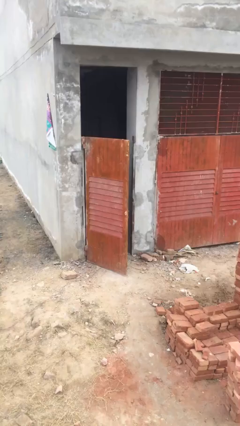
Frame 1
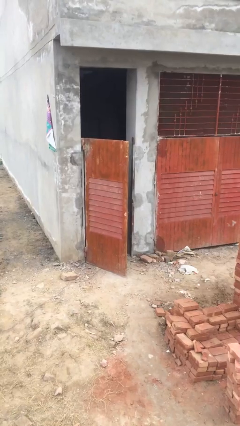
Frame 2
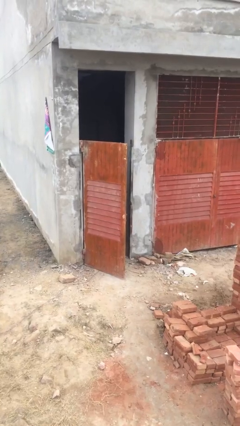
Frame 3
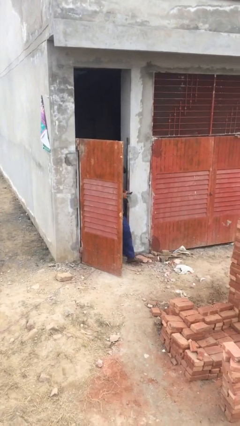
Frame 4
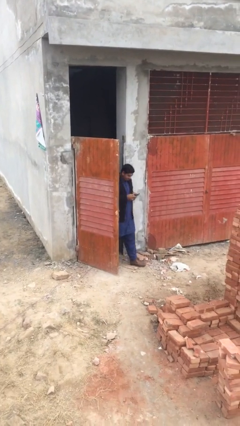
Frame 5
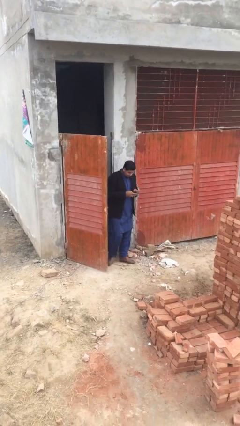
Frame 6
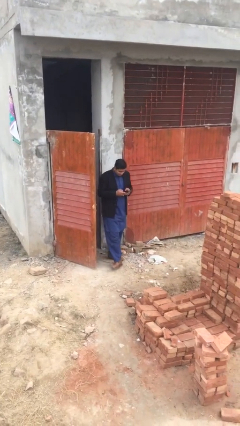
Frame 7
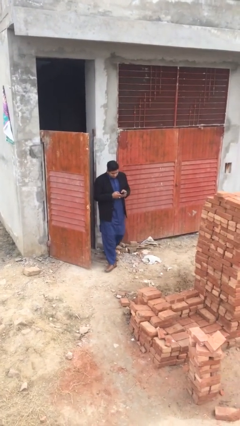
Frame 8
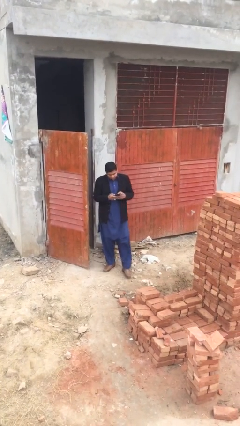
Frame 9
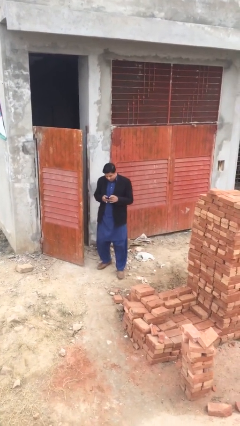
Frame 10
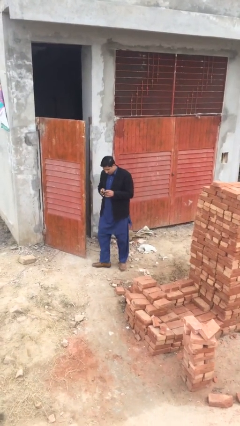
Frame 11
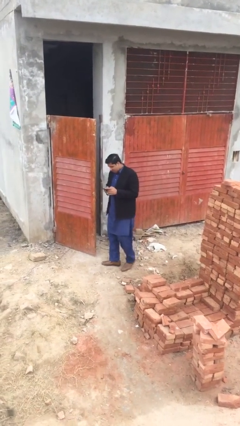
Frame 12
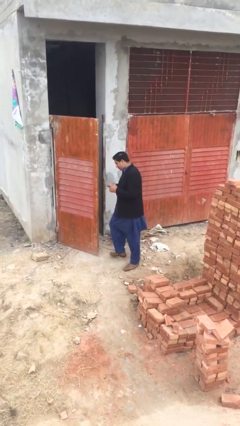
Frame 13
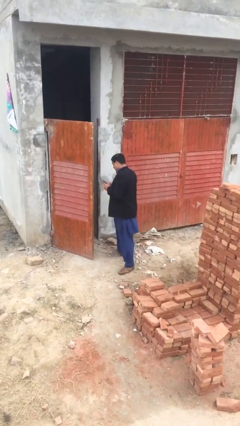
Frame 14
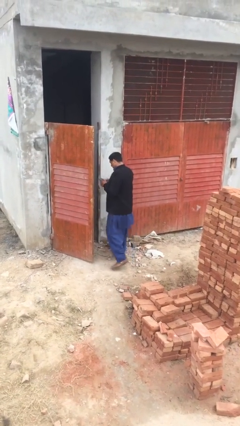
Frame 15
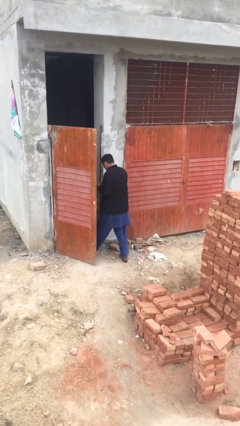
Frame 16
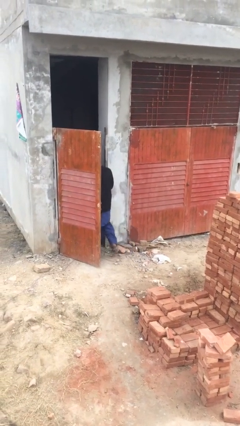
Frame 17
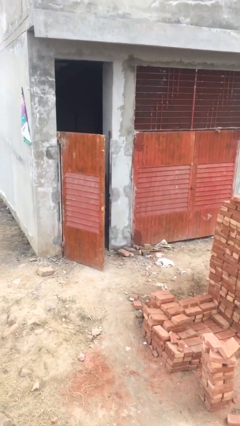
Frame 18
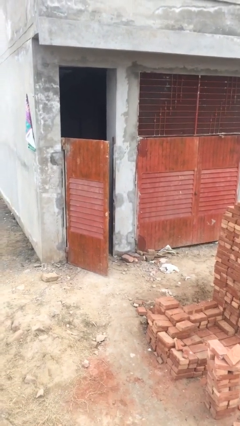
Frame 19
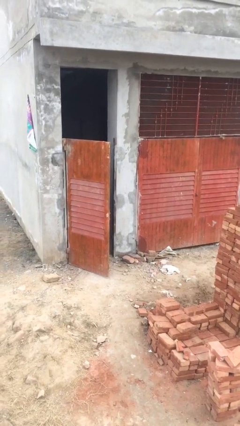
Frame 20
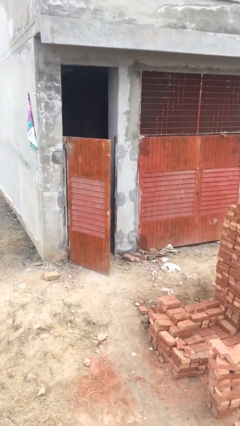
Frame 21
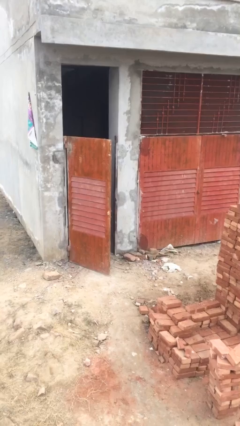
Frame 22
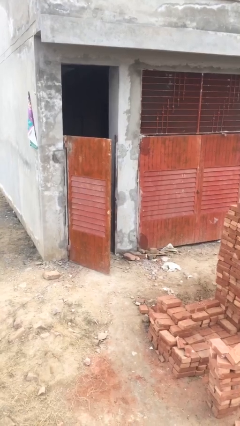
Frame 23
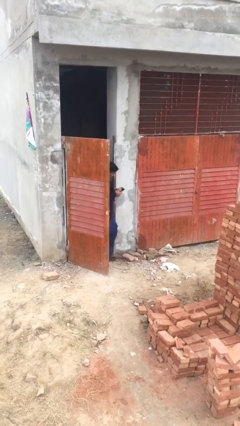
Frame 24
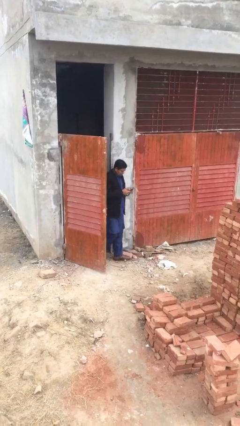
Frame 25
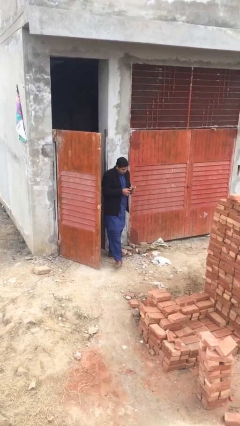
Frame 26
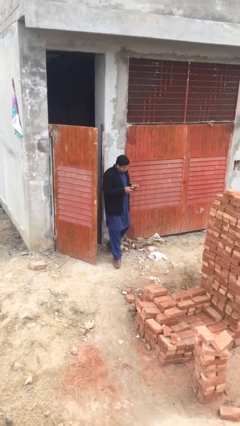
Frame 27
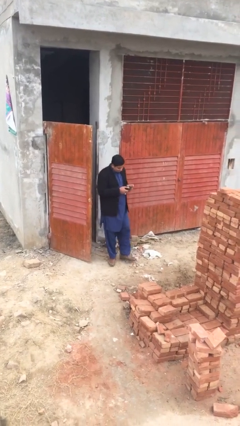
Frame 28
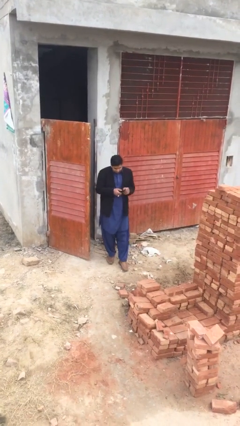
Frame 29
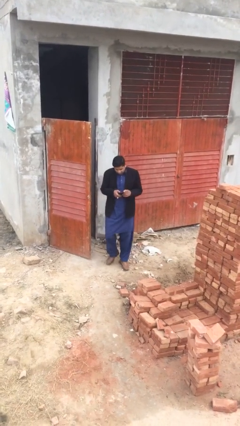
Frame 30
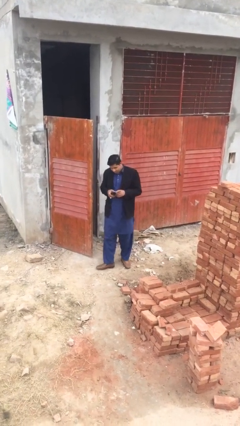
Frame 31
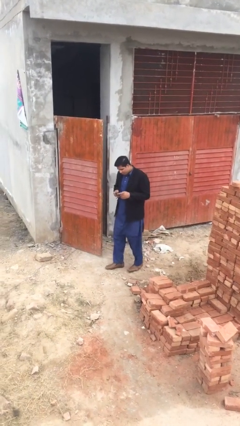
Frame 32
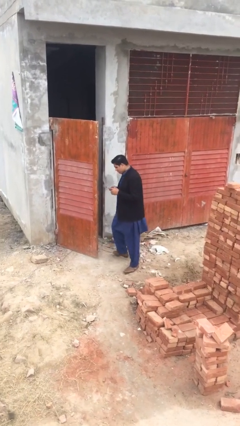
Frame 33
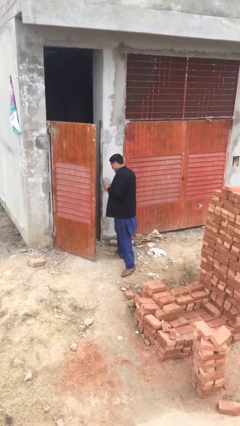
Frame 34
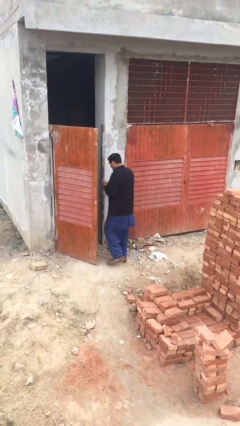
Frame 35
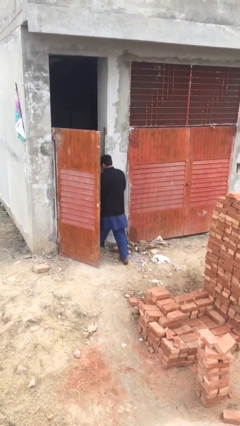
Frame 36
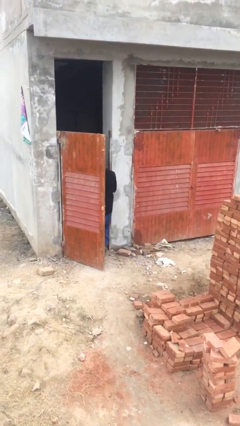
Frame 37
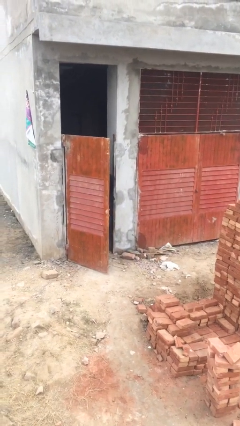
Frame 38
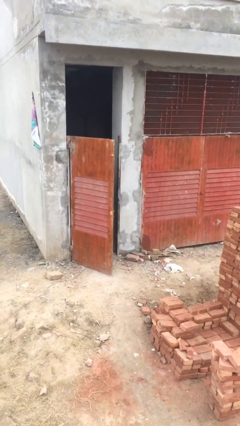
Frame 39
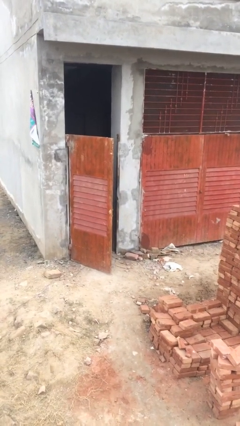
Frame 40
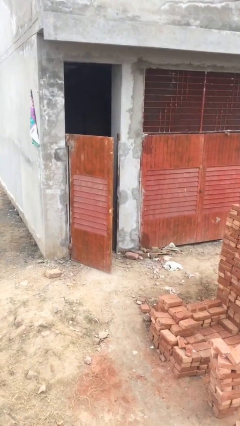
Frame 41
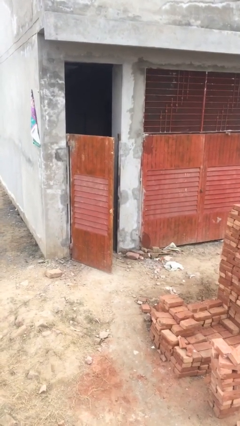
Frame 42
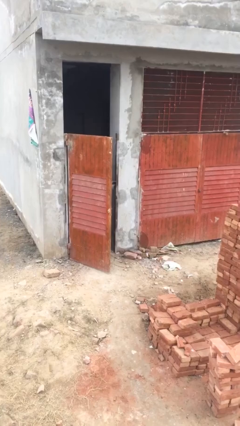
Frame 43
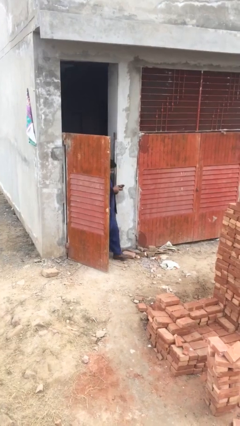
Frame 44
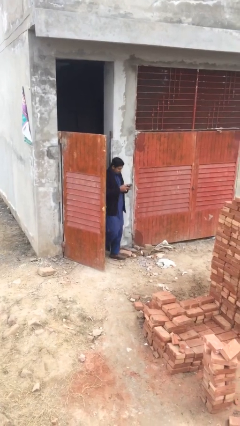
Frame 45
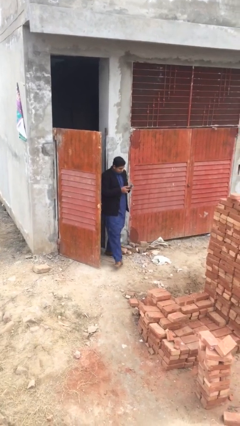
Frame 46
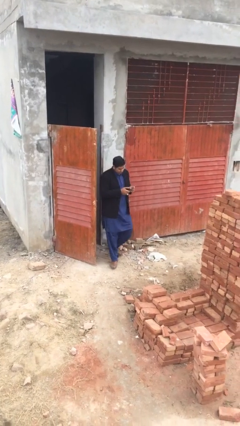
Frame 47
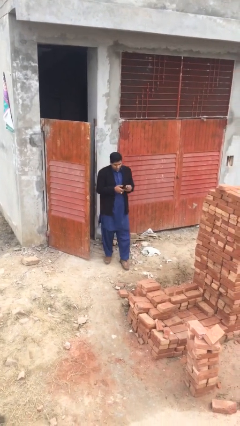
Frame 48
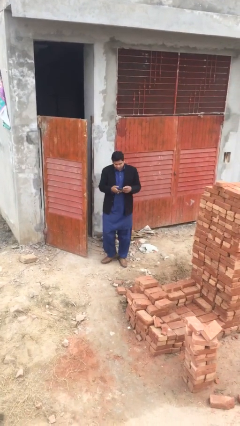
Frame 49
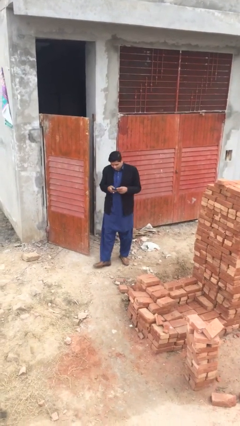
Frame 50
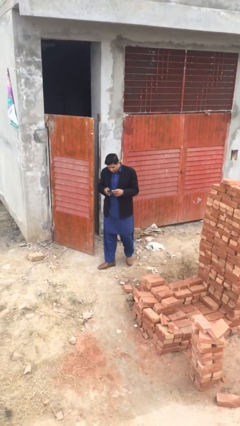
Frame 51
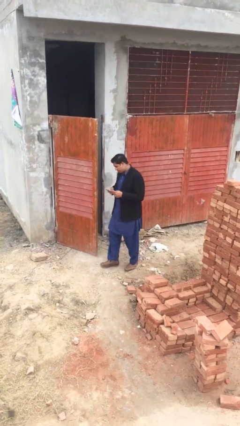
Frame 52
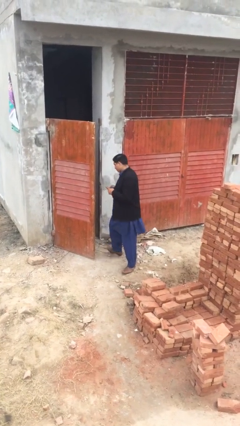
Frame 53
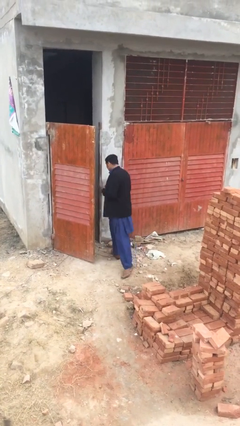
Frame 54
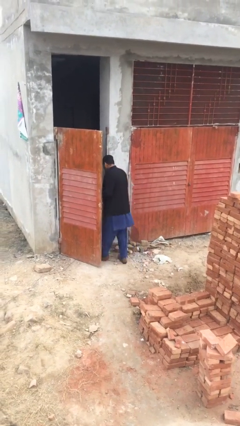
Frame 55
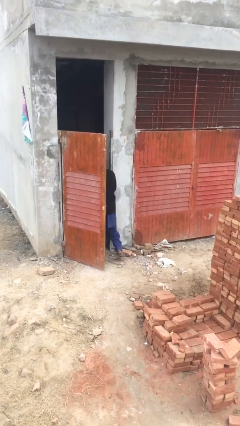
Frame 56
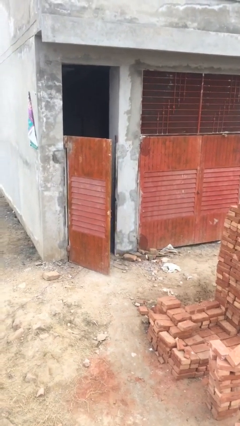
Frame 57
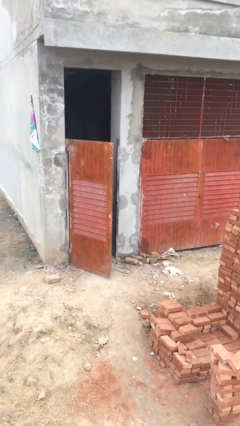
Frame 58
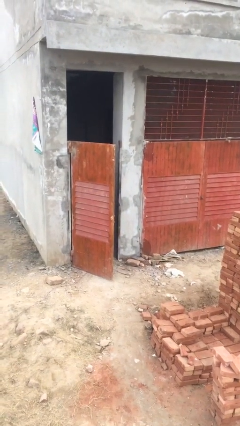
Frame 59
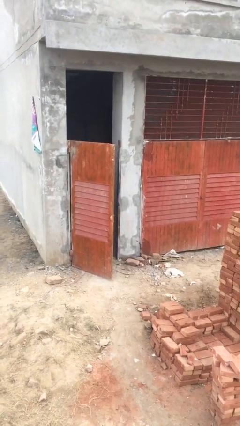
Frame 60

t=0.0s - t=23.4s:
person texts on phone

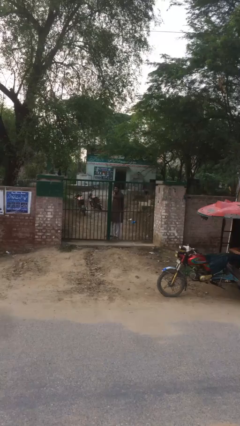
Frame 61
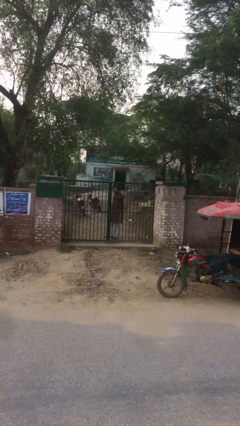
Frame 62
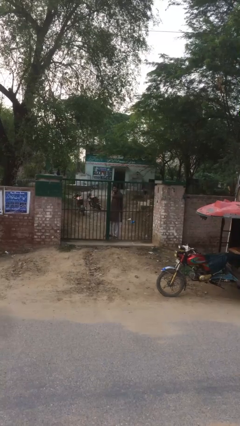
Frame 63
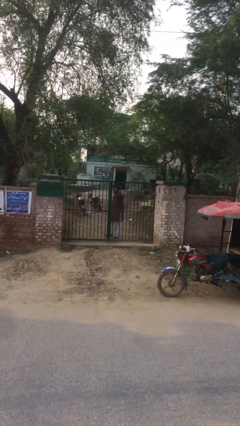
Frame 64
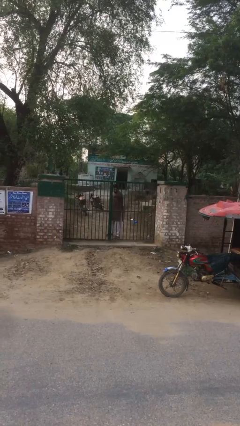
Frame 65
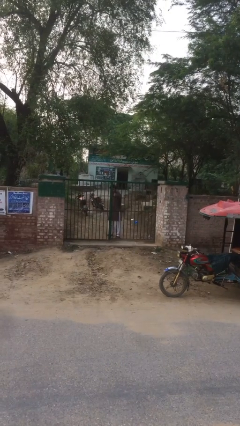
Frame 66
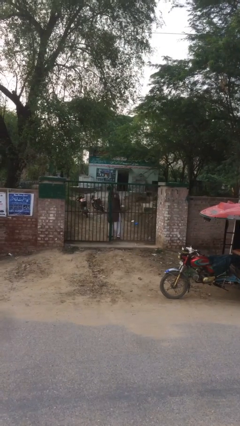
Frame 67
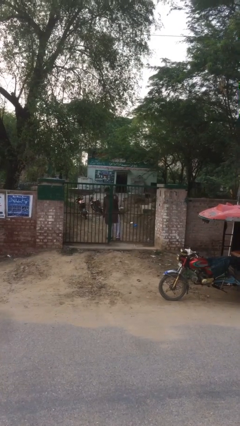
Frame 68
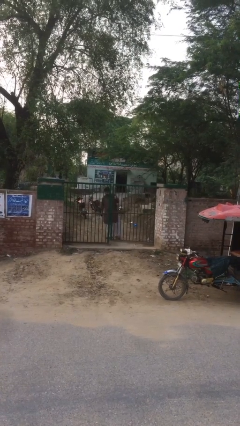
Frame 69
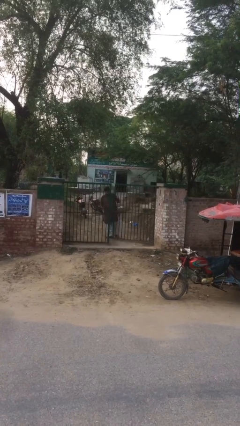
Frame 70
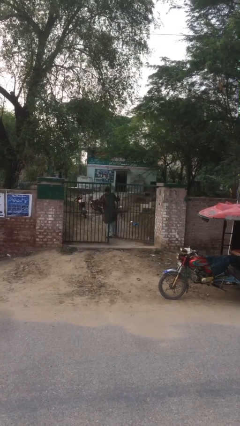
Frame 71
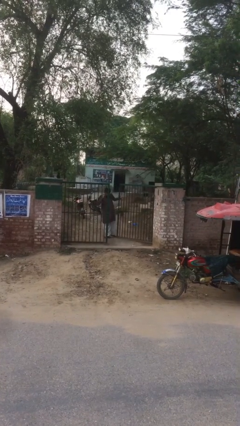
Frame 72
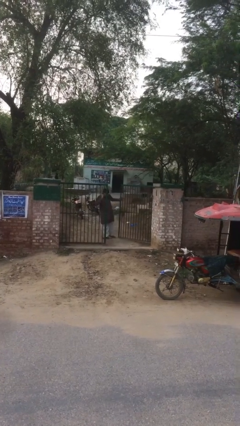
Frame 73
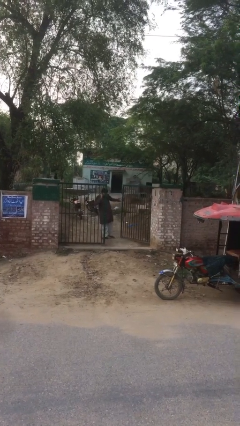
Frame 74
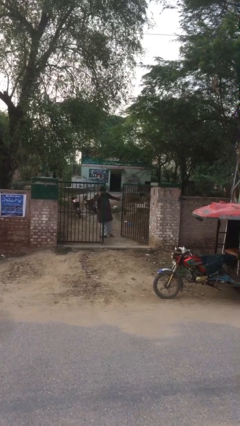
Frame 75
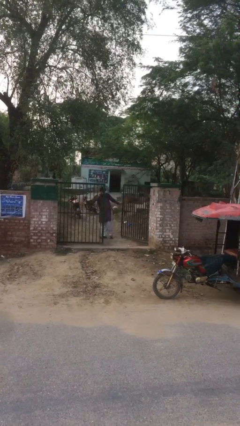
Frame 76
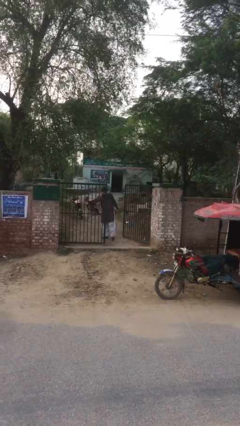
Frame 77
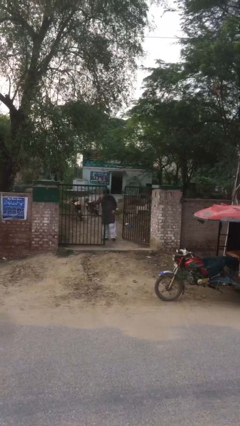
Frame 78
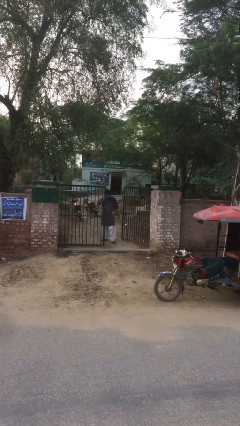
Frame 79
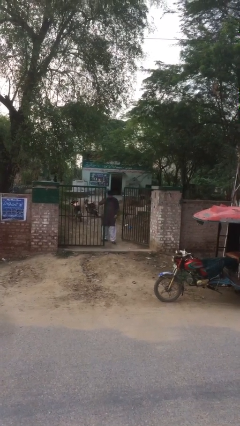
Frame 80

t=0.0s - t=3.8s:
person opens facility door

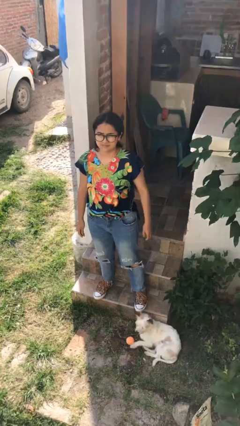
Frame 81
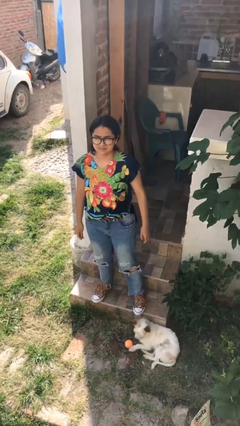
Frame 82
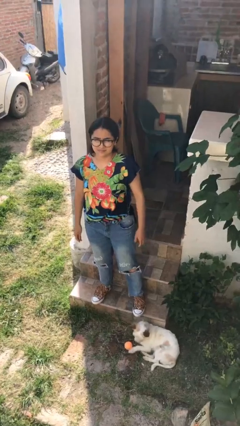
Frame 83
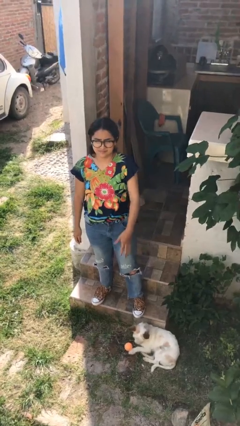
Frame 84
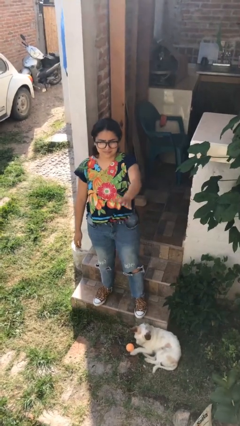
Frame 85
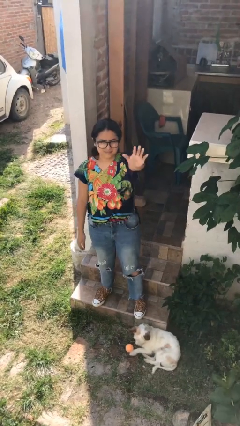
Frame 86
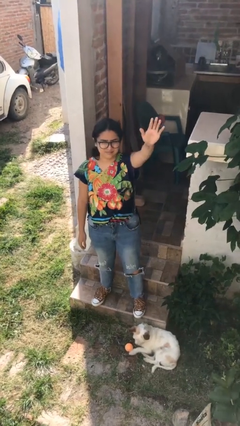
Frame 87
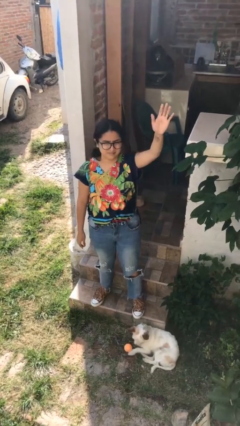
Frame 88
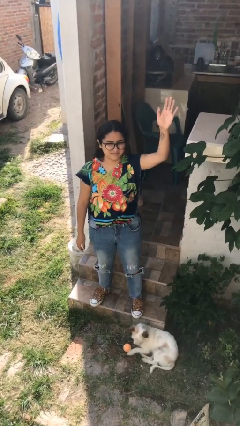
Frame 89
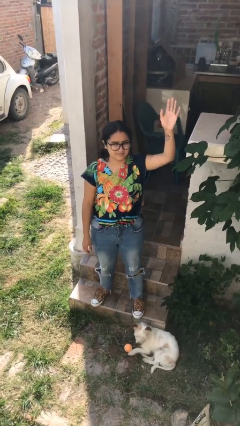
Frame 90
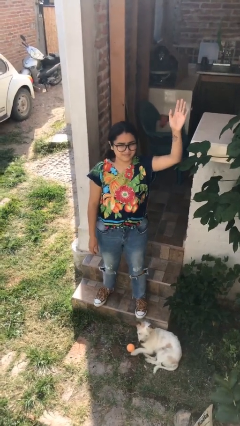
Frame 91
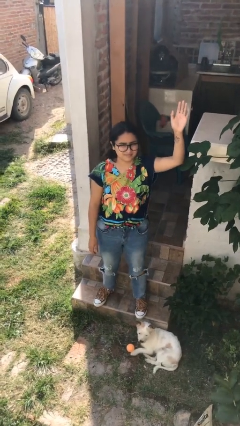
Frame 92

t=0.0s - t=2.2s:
person gestures swipe up
